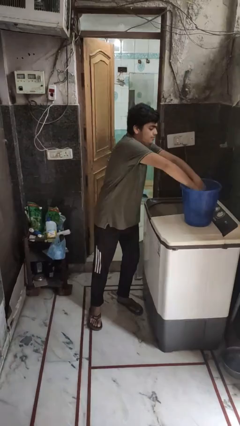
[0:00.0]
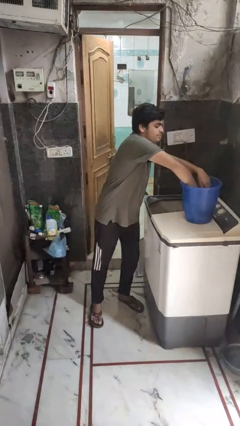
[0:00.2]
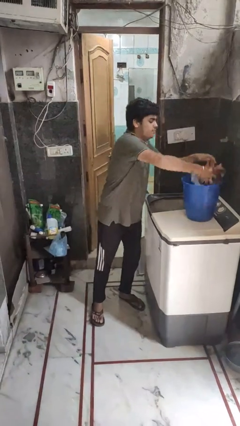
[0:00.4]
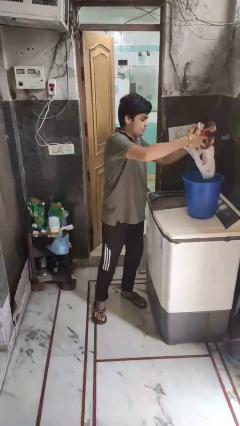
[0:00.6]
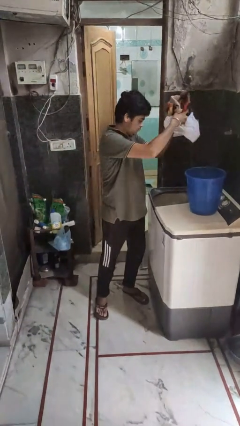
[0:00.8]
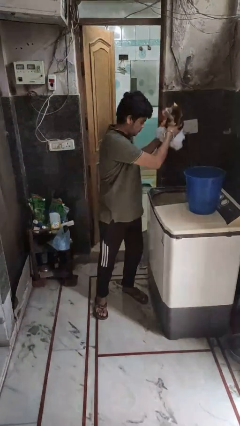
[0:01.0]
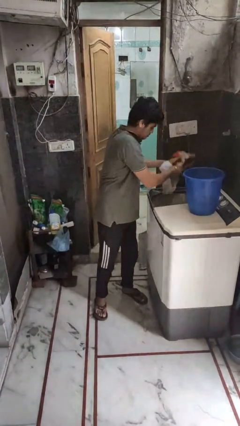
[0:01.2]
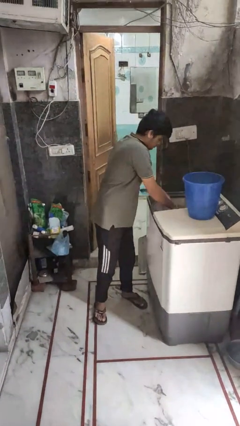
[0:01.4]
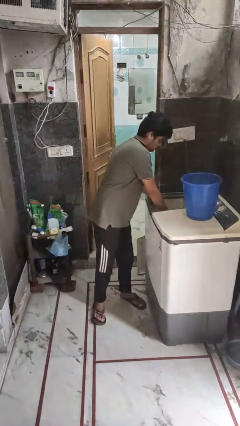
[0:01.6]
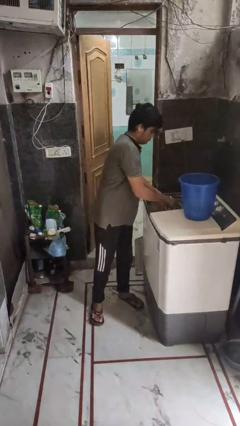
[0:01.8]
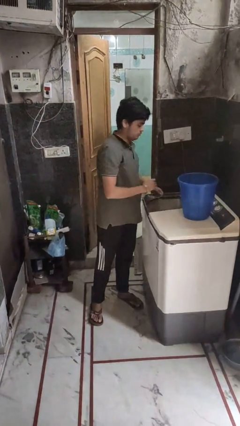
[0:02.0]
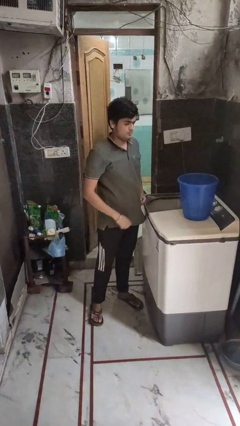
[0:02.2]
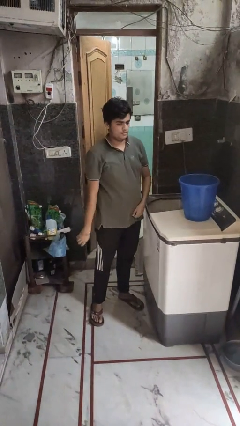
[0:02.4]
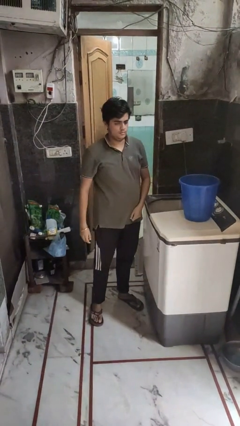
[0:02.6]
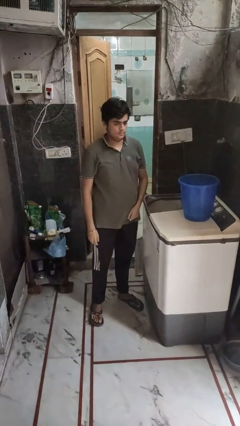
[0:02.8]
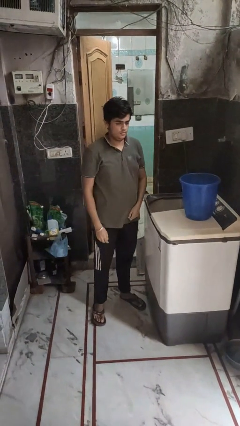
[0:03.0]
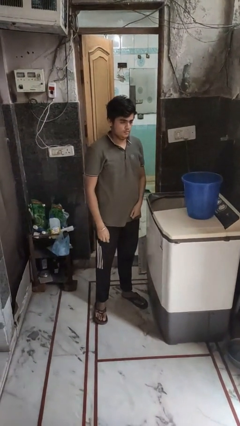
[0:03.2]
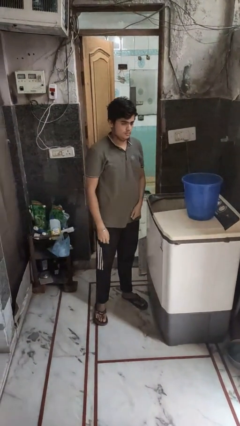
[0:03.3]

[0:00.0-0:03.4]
person loads clotheswasher

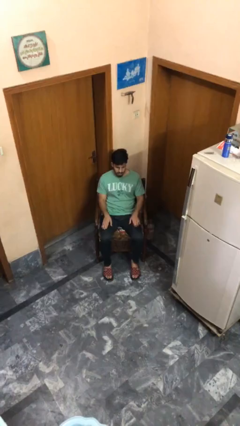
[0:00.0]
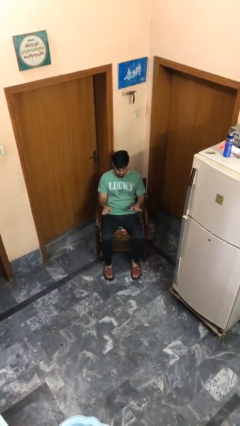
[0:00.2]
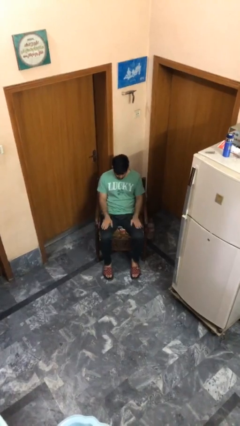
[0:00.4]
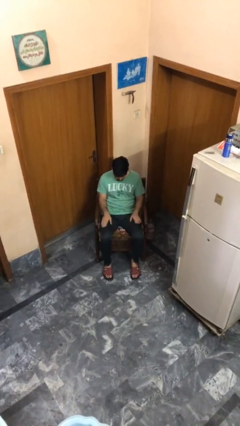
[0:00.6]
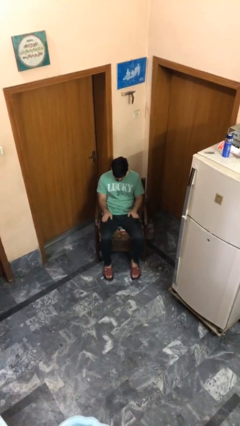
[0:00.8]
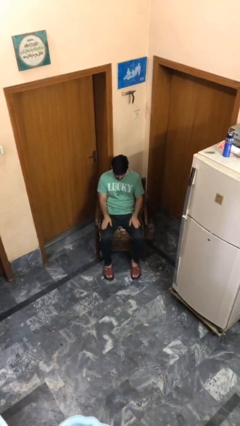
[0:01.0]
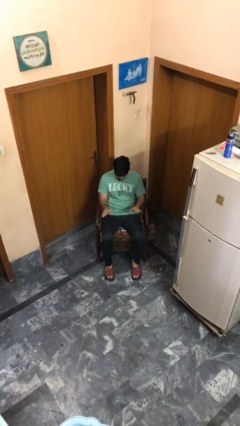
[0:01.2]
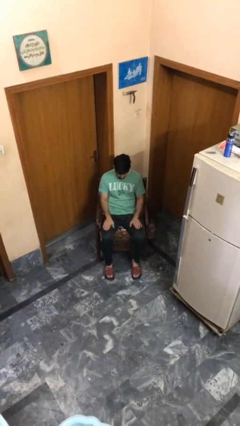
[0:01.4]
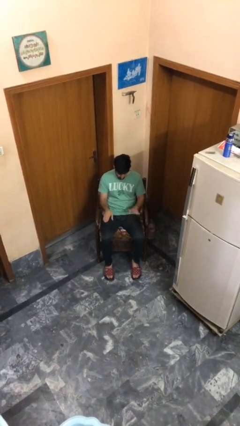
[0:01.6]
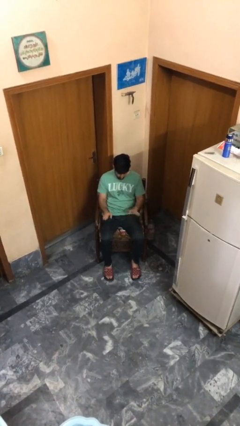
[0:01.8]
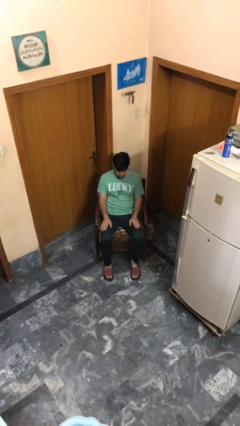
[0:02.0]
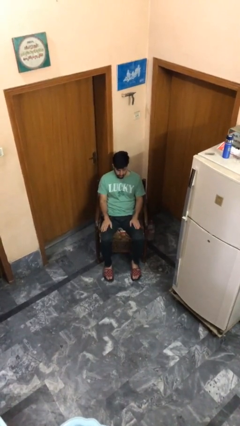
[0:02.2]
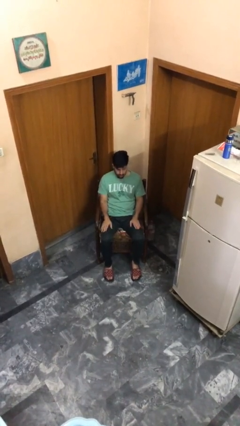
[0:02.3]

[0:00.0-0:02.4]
person slaps hands on thighs

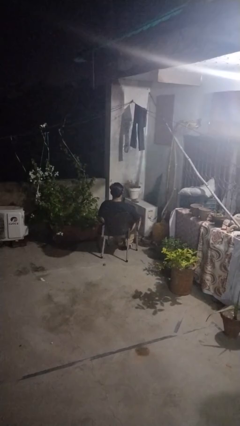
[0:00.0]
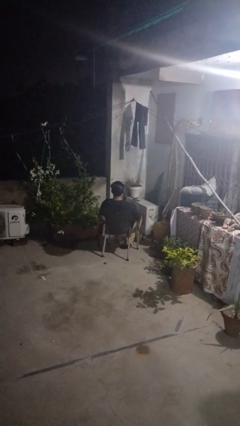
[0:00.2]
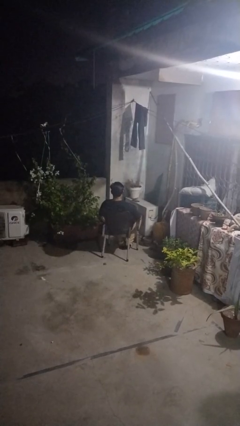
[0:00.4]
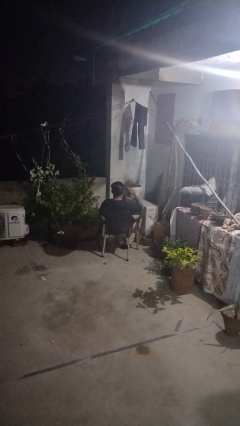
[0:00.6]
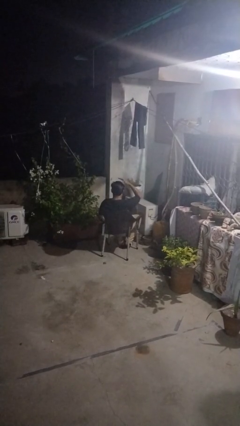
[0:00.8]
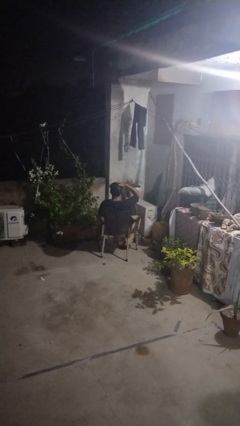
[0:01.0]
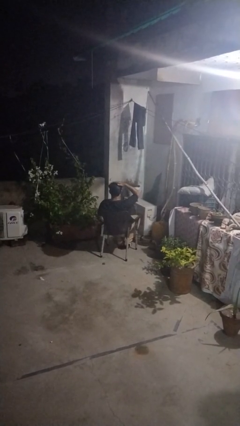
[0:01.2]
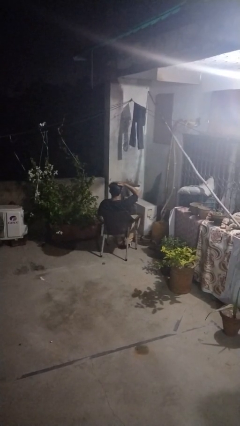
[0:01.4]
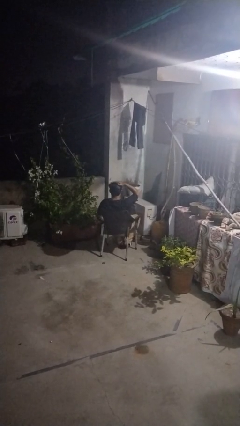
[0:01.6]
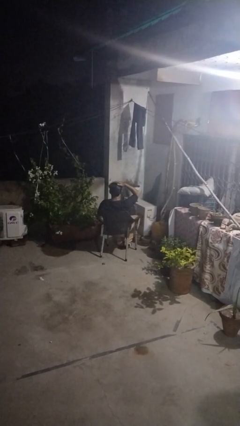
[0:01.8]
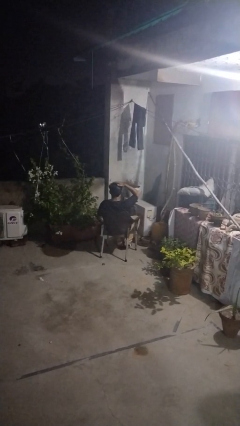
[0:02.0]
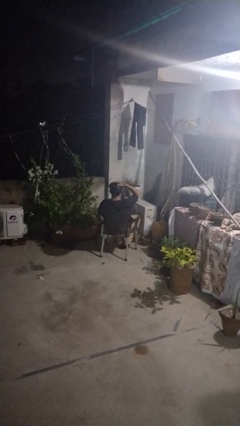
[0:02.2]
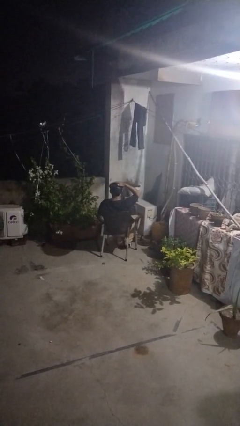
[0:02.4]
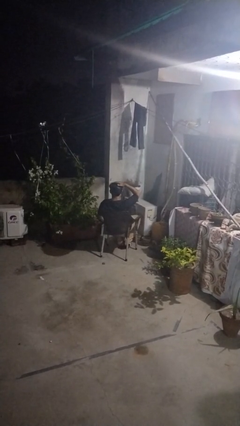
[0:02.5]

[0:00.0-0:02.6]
person pats head

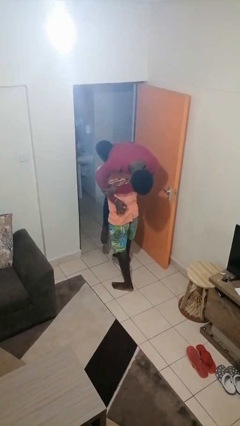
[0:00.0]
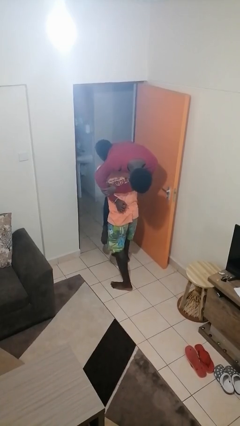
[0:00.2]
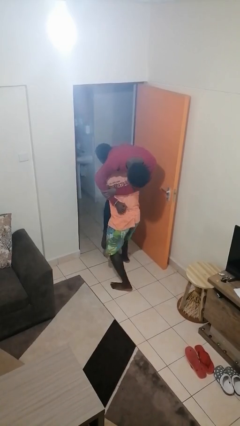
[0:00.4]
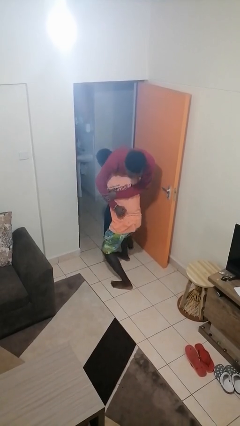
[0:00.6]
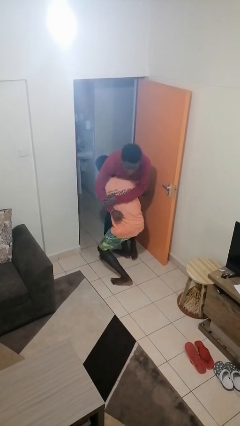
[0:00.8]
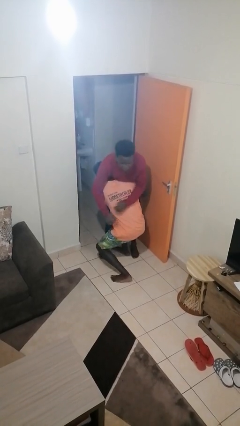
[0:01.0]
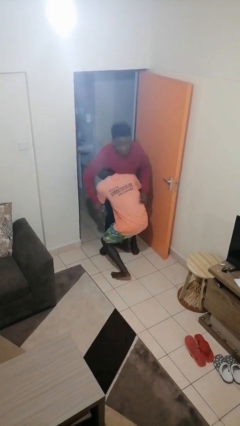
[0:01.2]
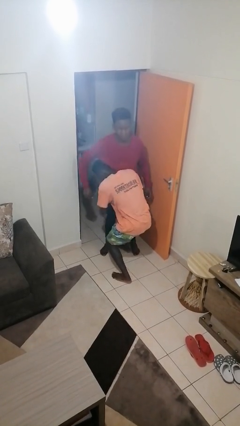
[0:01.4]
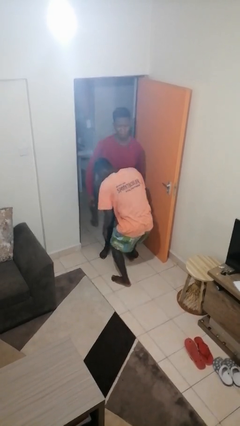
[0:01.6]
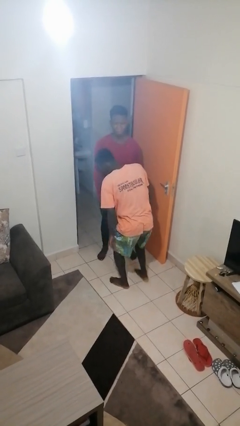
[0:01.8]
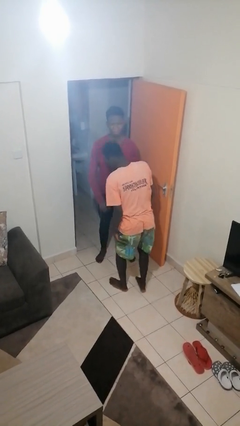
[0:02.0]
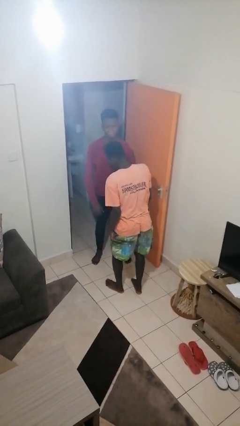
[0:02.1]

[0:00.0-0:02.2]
person puts down person

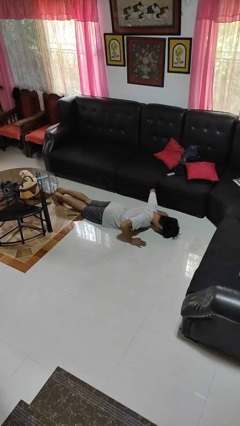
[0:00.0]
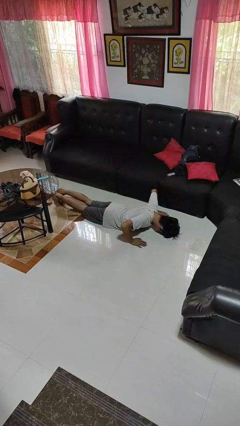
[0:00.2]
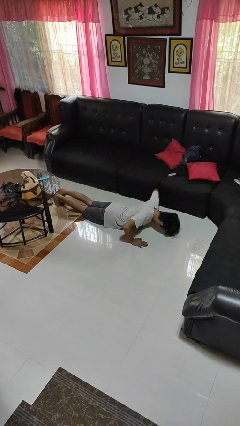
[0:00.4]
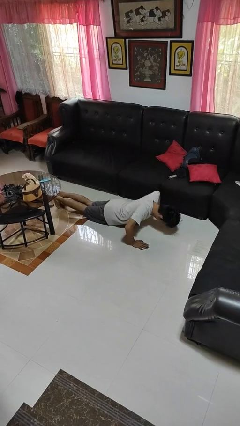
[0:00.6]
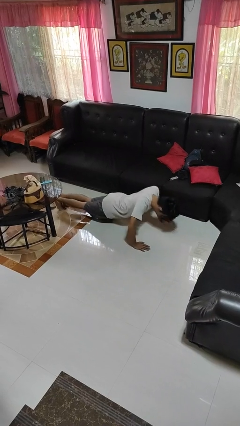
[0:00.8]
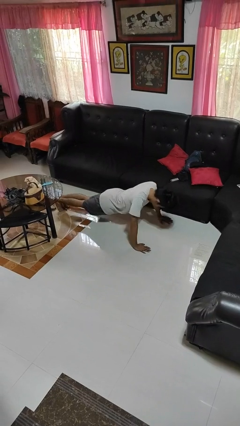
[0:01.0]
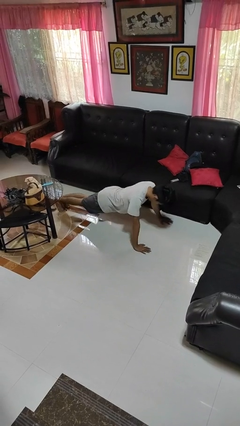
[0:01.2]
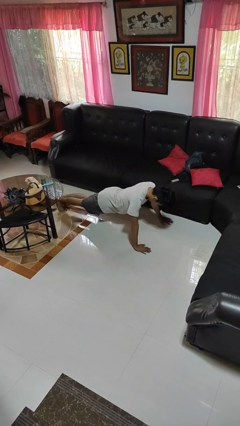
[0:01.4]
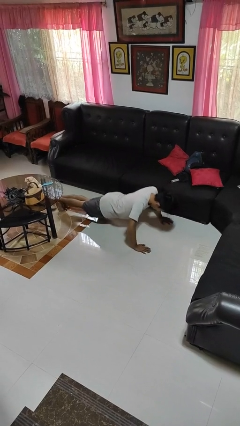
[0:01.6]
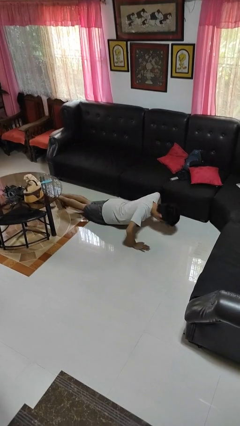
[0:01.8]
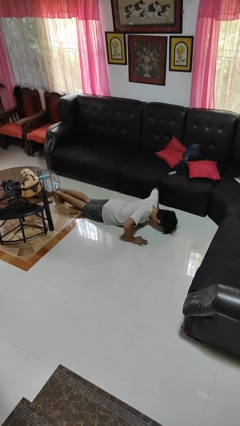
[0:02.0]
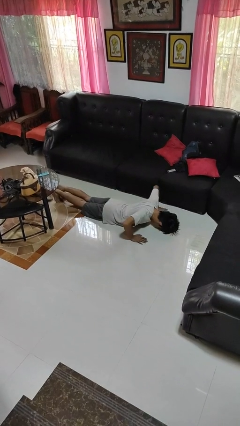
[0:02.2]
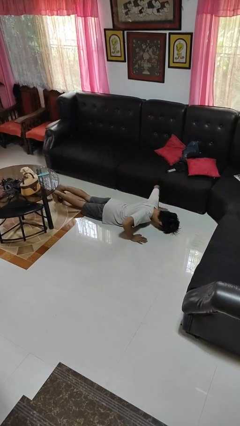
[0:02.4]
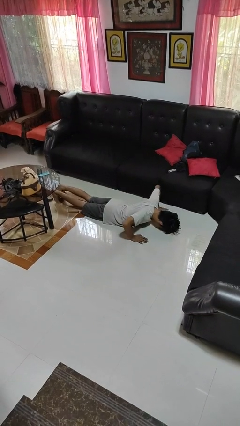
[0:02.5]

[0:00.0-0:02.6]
person exercises with pushup

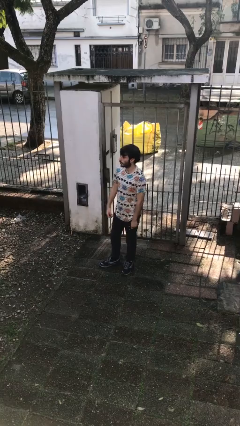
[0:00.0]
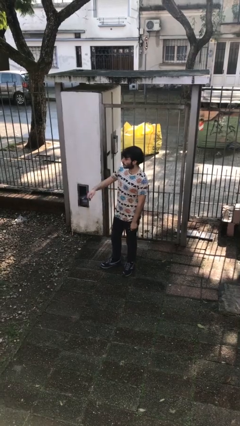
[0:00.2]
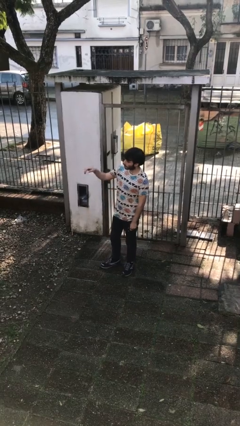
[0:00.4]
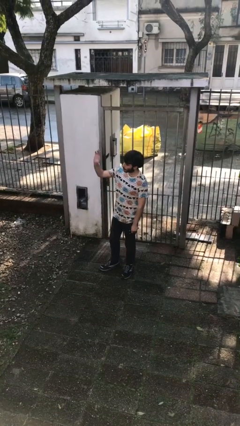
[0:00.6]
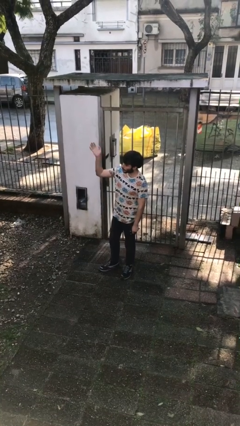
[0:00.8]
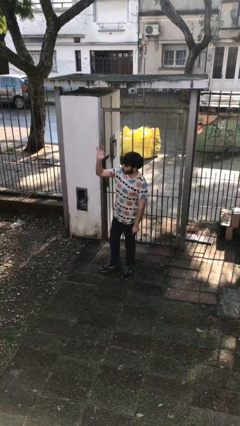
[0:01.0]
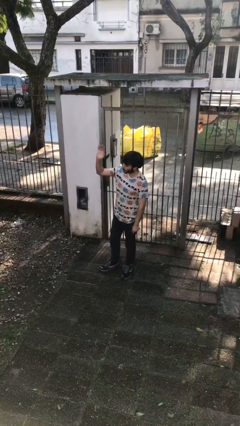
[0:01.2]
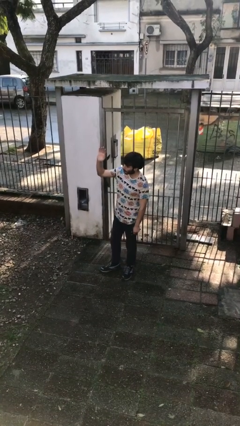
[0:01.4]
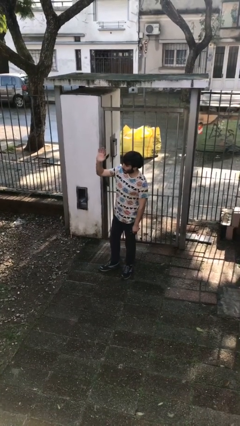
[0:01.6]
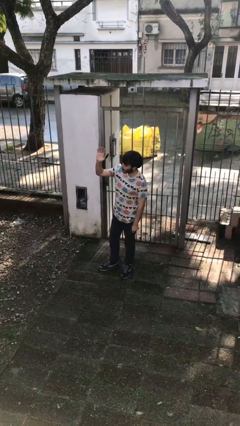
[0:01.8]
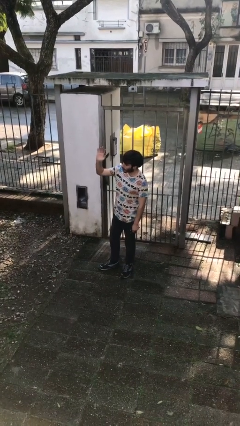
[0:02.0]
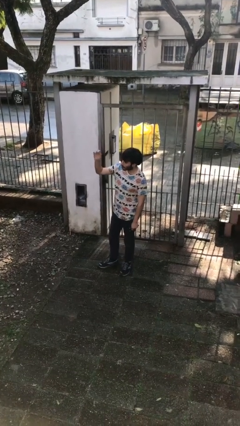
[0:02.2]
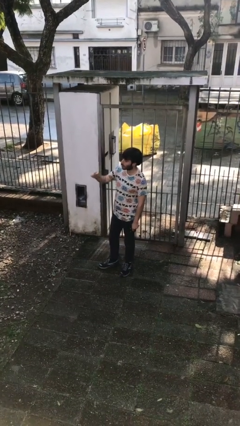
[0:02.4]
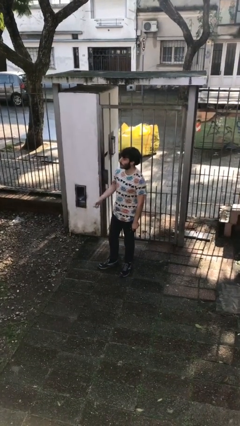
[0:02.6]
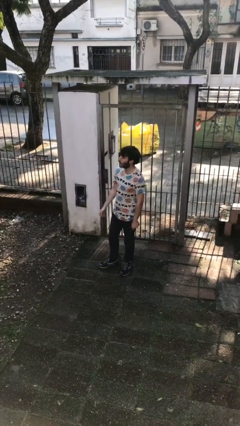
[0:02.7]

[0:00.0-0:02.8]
person waves at person

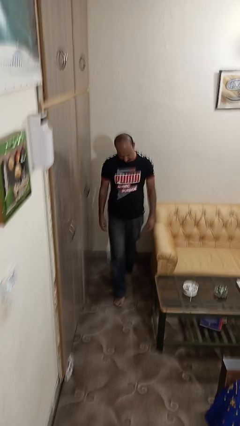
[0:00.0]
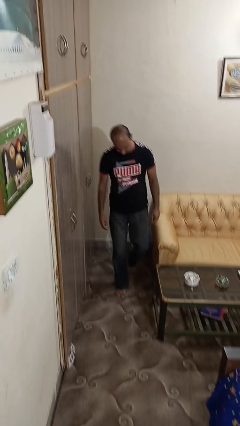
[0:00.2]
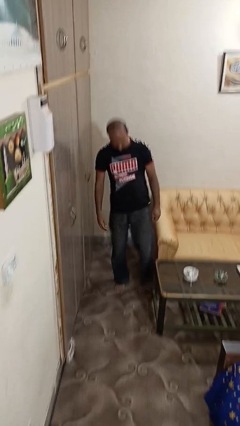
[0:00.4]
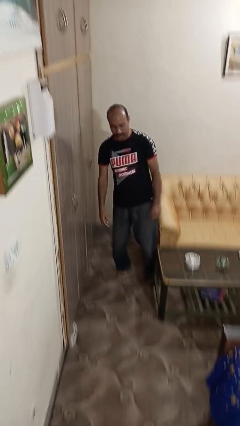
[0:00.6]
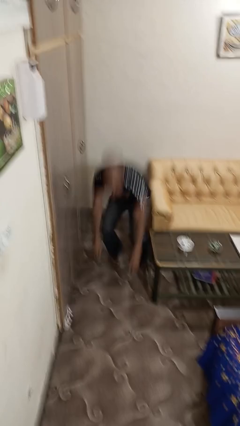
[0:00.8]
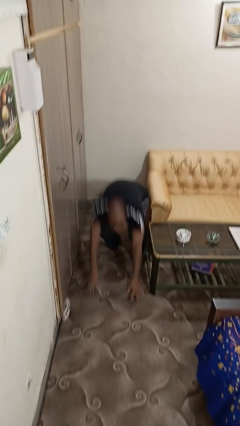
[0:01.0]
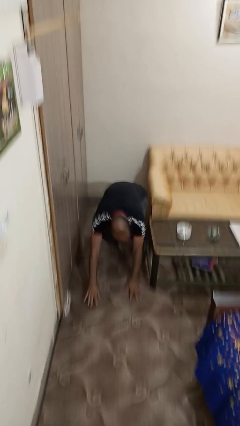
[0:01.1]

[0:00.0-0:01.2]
person trips on object on floor
